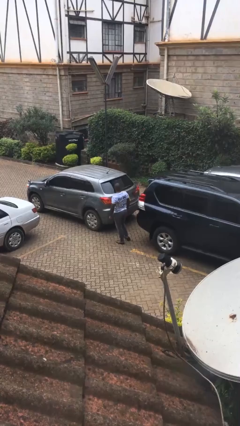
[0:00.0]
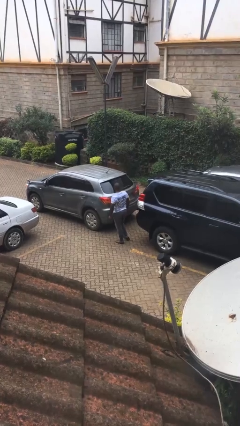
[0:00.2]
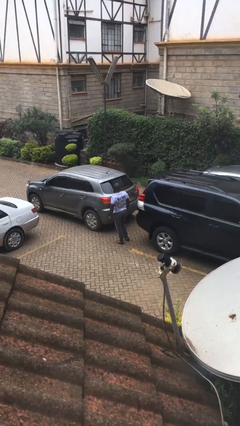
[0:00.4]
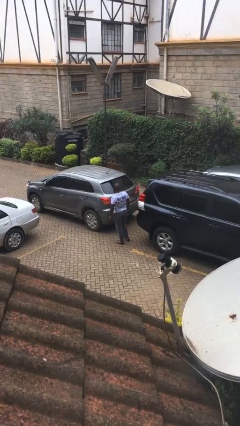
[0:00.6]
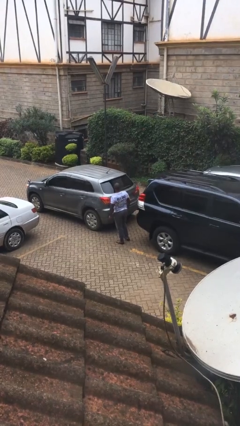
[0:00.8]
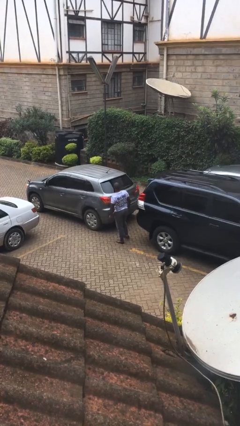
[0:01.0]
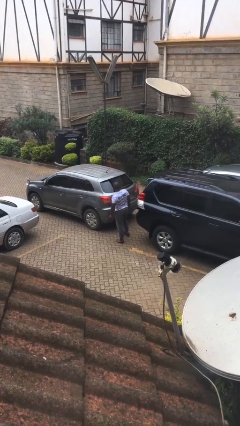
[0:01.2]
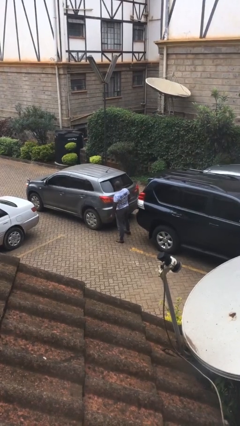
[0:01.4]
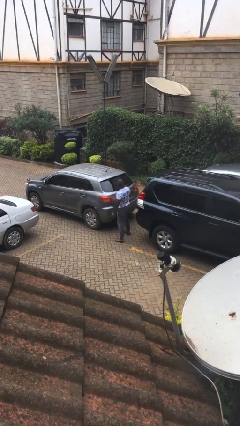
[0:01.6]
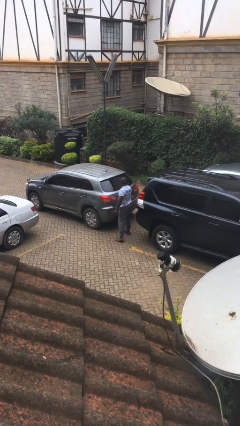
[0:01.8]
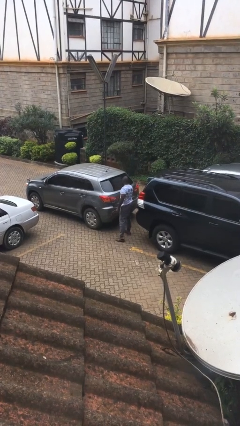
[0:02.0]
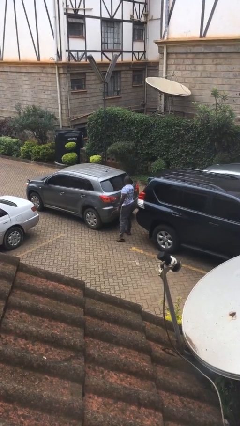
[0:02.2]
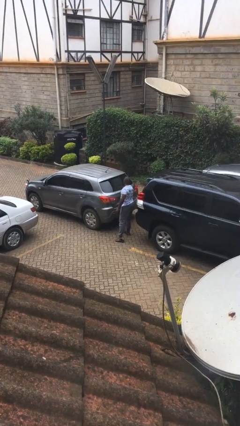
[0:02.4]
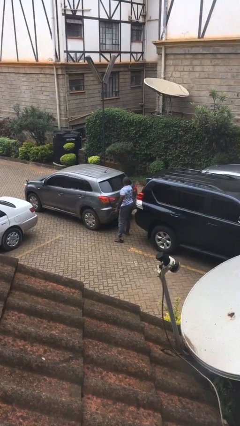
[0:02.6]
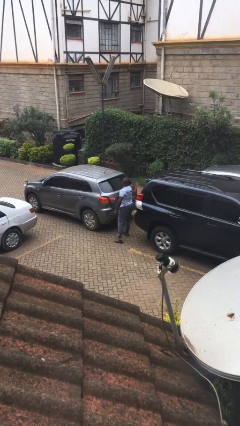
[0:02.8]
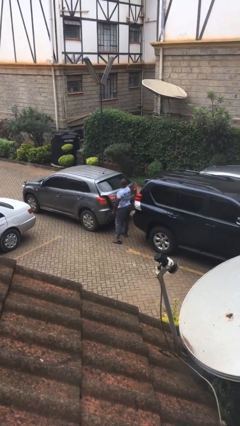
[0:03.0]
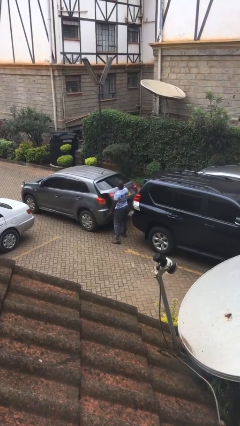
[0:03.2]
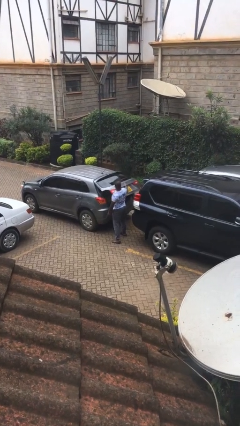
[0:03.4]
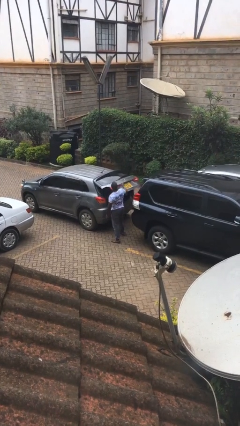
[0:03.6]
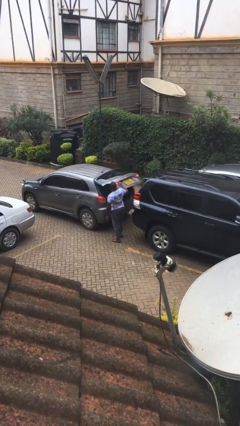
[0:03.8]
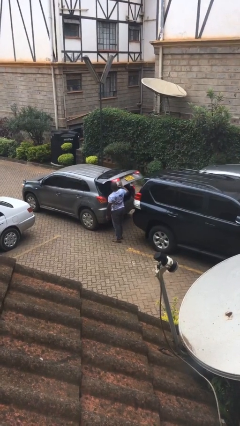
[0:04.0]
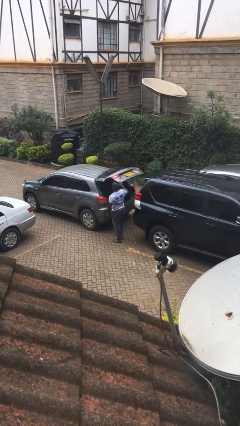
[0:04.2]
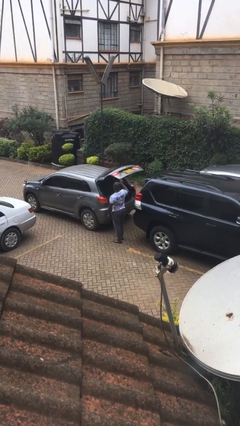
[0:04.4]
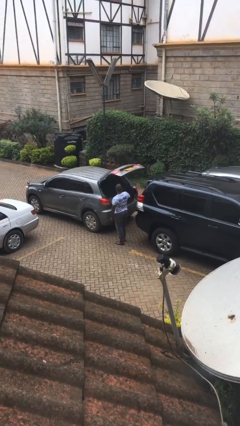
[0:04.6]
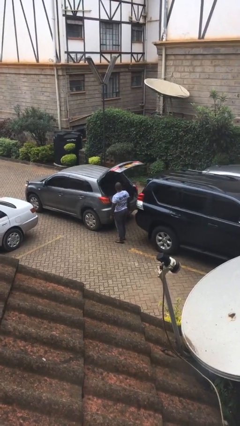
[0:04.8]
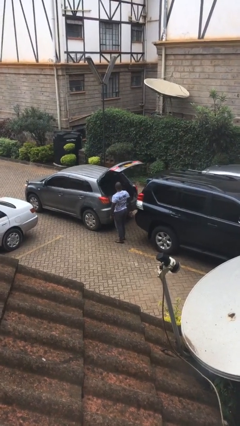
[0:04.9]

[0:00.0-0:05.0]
person opens car trunk

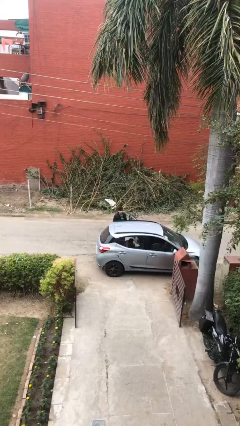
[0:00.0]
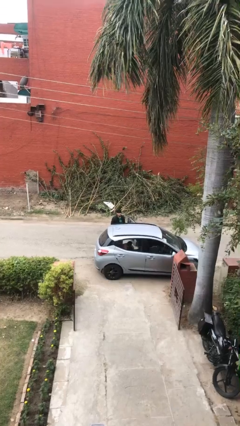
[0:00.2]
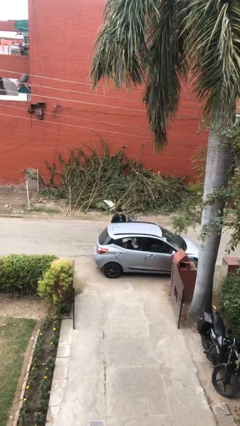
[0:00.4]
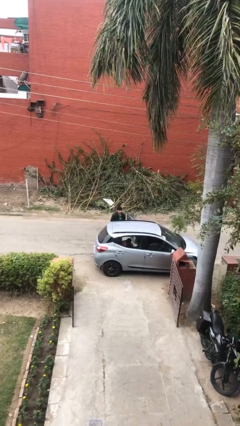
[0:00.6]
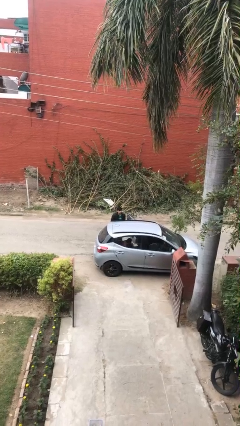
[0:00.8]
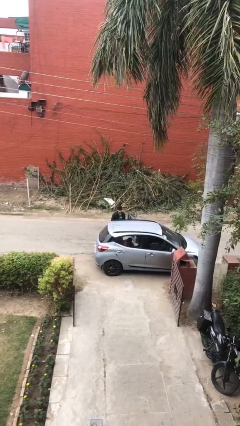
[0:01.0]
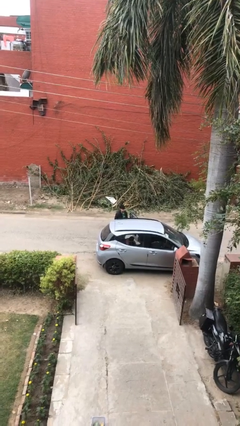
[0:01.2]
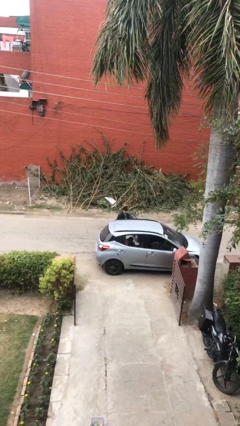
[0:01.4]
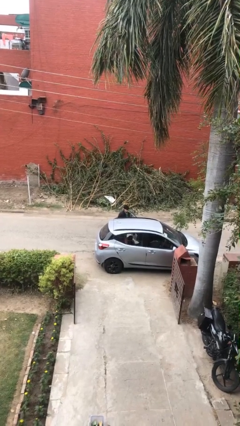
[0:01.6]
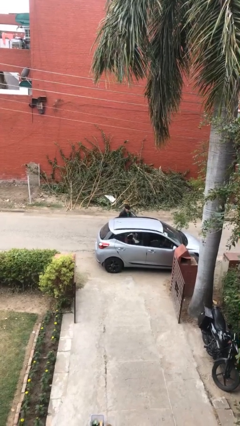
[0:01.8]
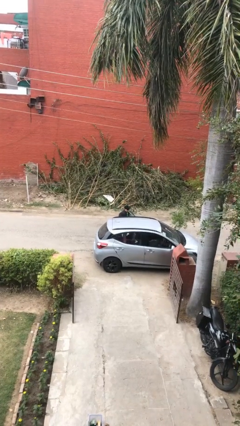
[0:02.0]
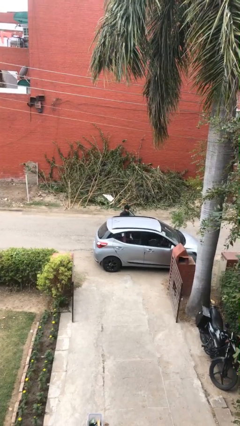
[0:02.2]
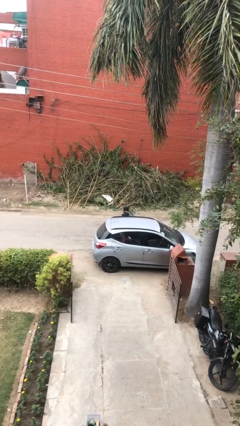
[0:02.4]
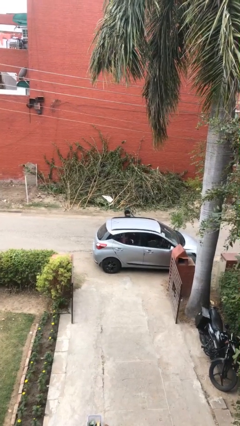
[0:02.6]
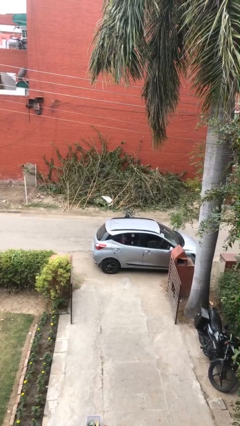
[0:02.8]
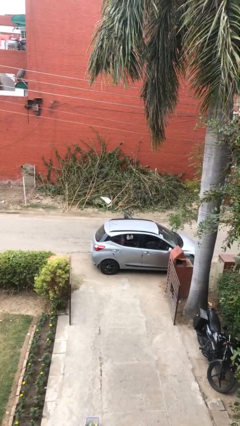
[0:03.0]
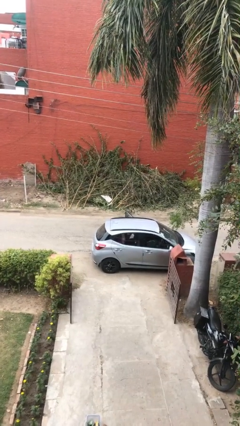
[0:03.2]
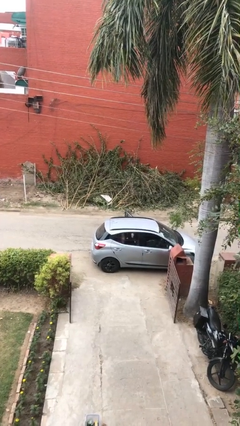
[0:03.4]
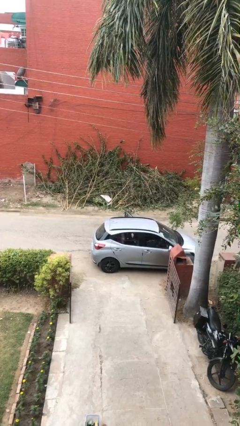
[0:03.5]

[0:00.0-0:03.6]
person enters car

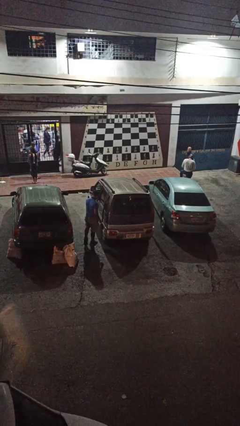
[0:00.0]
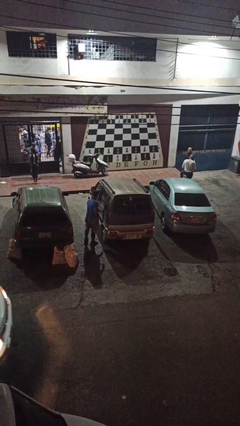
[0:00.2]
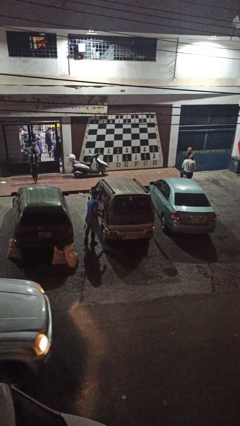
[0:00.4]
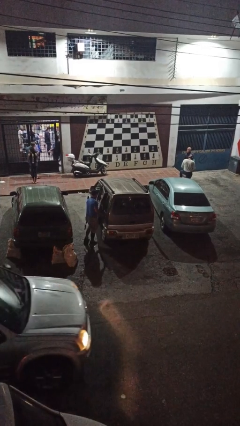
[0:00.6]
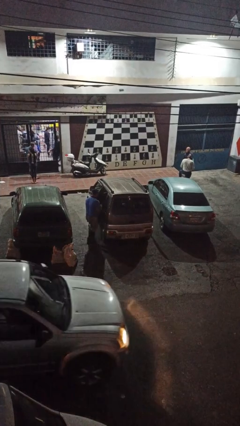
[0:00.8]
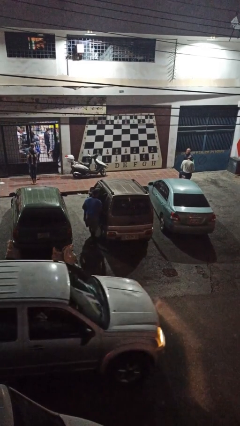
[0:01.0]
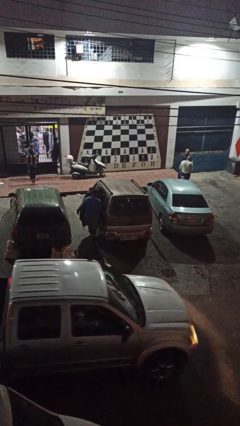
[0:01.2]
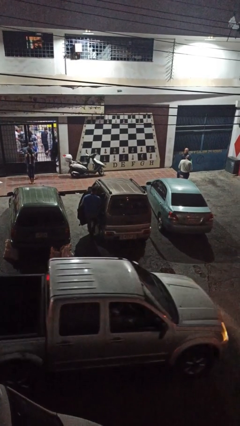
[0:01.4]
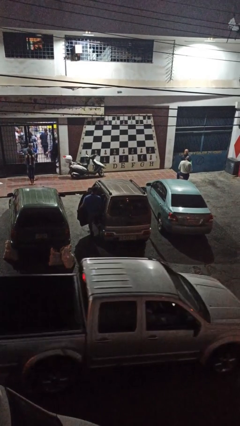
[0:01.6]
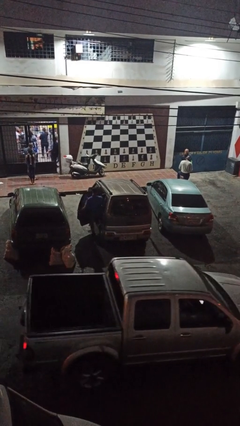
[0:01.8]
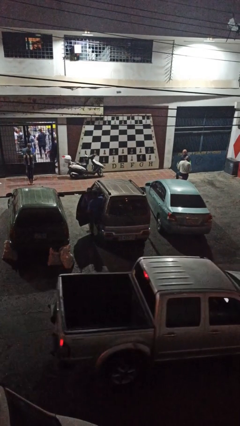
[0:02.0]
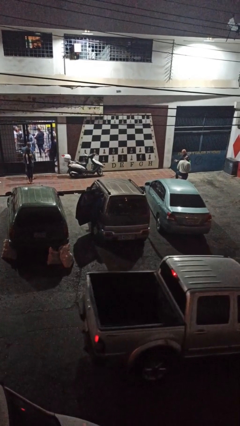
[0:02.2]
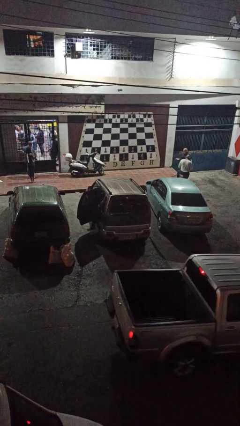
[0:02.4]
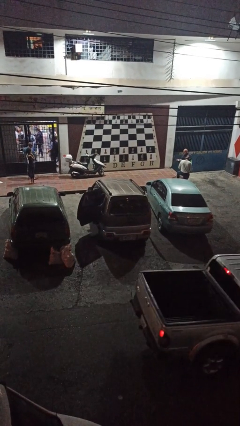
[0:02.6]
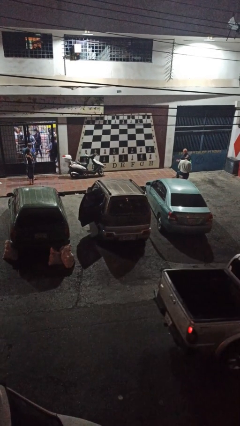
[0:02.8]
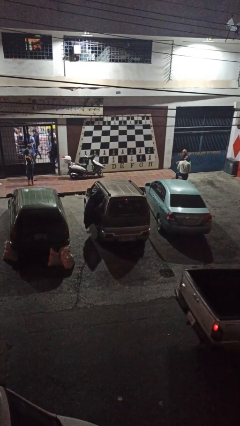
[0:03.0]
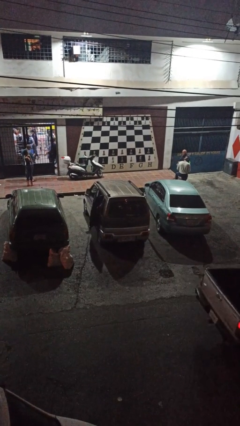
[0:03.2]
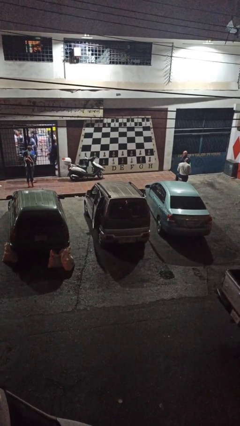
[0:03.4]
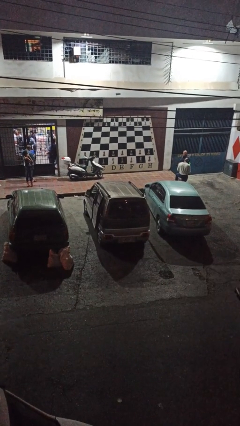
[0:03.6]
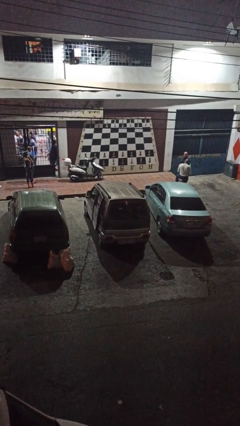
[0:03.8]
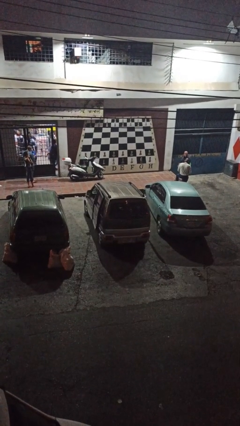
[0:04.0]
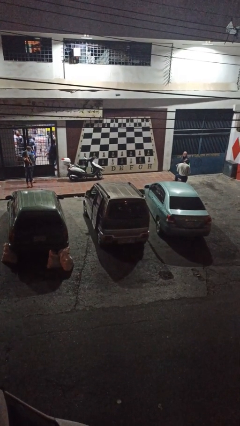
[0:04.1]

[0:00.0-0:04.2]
car picks up person

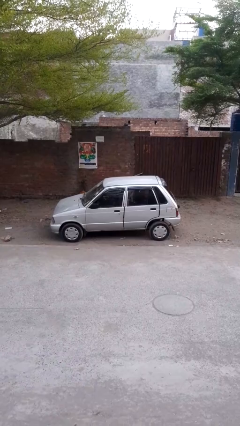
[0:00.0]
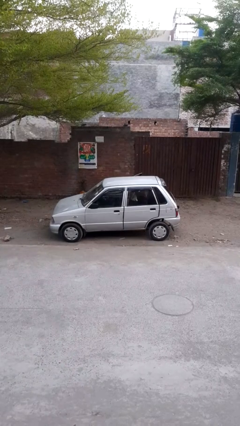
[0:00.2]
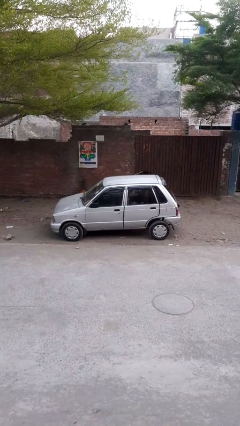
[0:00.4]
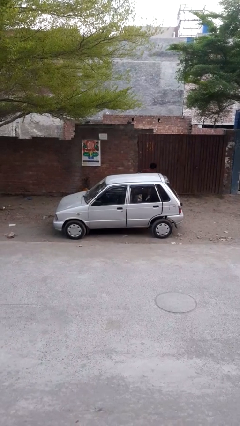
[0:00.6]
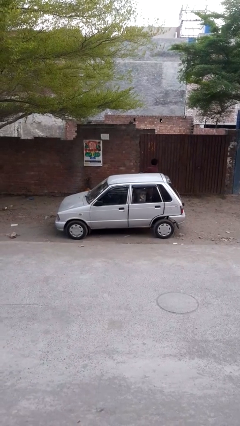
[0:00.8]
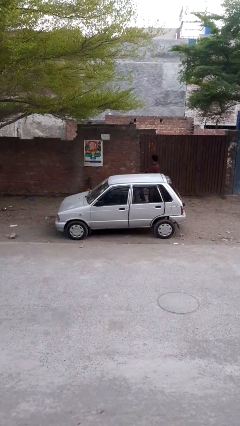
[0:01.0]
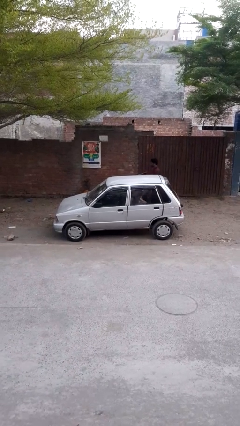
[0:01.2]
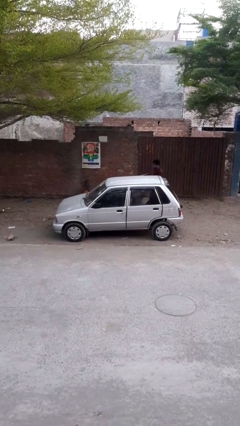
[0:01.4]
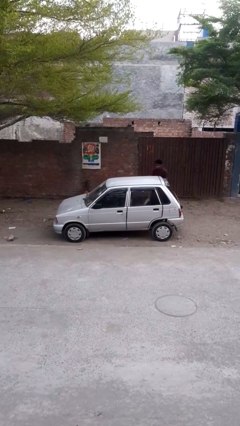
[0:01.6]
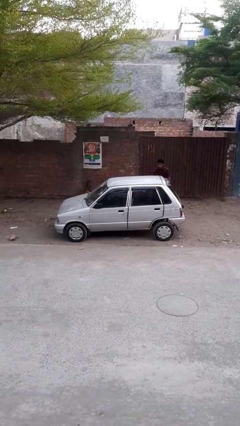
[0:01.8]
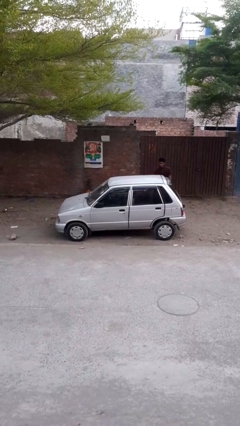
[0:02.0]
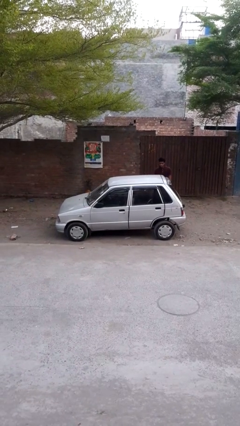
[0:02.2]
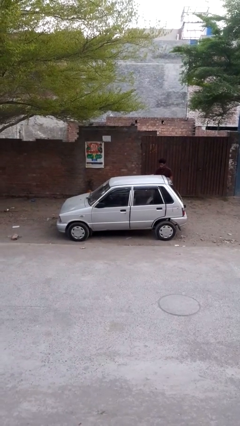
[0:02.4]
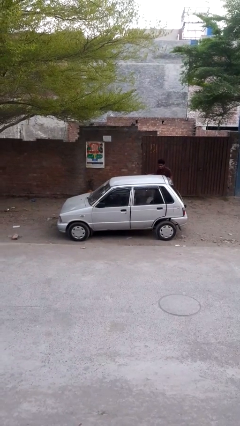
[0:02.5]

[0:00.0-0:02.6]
car drops off person

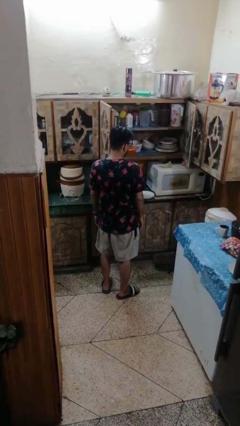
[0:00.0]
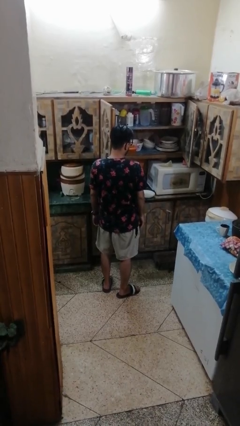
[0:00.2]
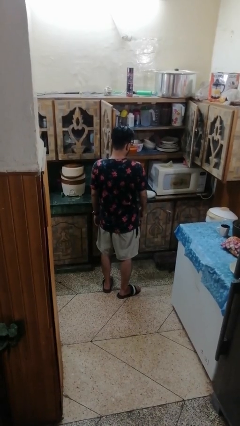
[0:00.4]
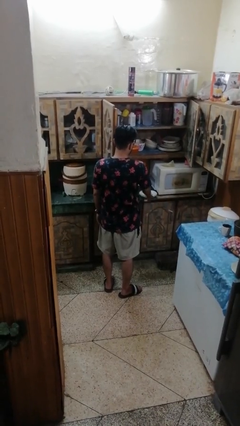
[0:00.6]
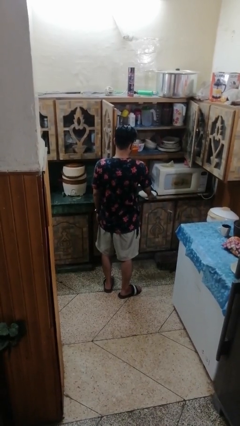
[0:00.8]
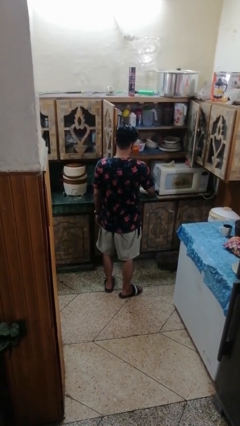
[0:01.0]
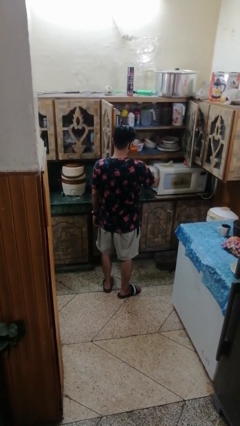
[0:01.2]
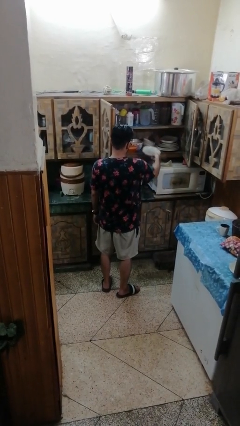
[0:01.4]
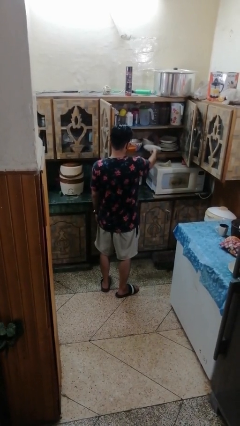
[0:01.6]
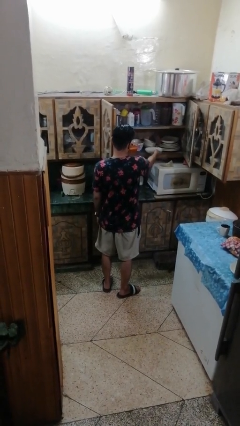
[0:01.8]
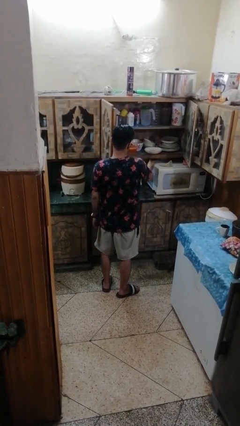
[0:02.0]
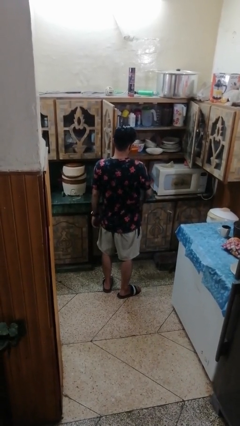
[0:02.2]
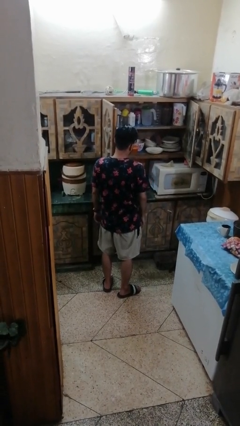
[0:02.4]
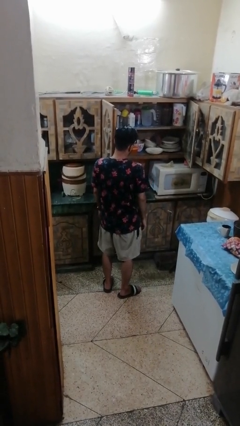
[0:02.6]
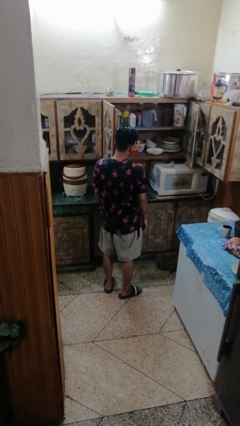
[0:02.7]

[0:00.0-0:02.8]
person puts object in cabinet
